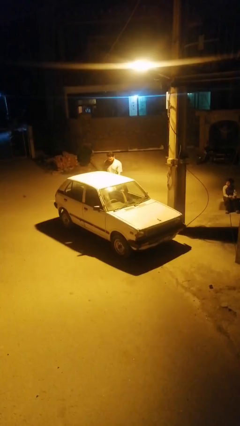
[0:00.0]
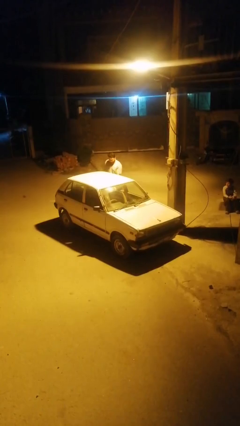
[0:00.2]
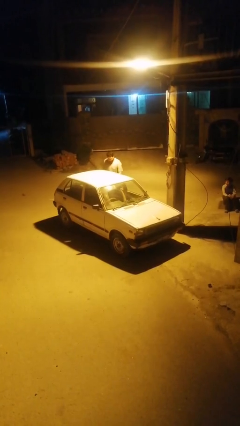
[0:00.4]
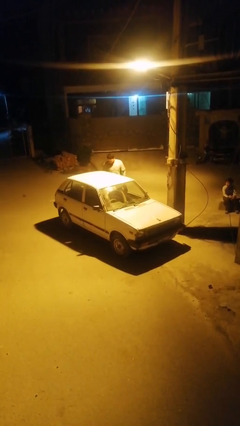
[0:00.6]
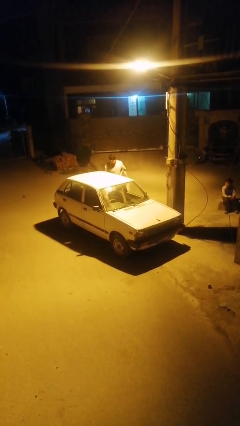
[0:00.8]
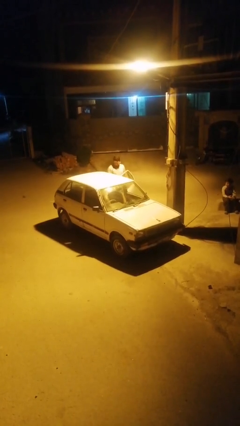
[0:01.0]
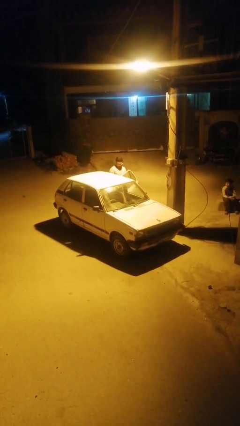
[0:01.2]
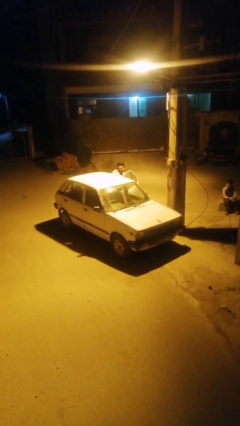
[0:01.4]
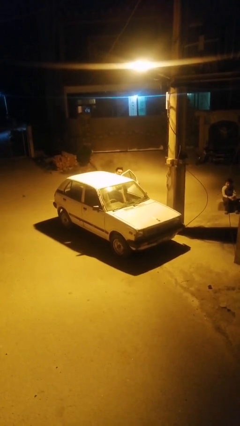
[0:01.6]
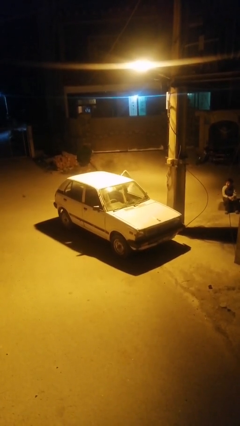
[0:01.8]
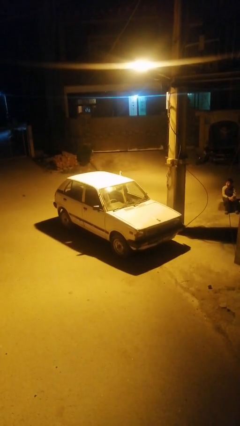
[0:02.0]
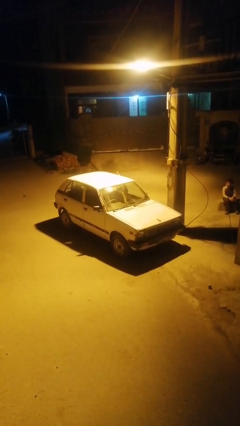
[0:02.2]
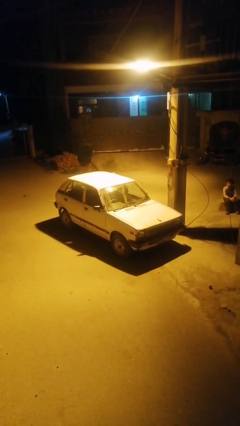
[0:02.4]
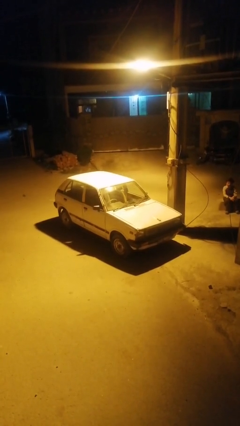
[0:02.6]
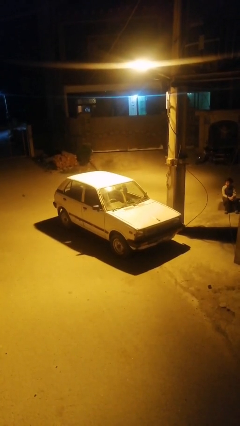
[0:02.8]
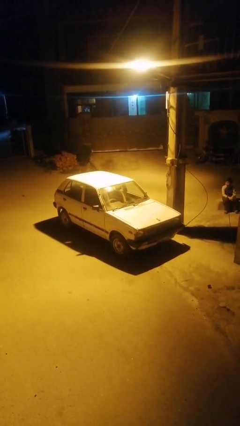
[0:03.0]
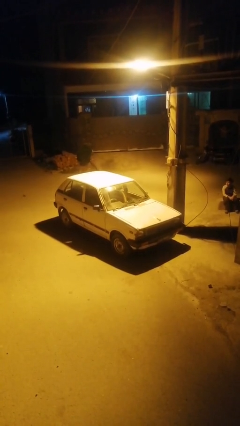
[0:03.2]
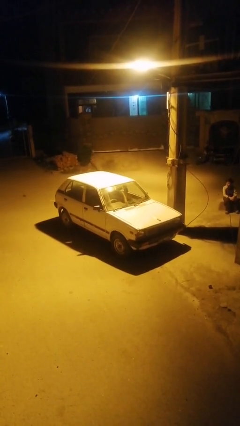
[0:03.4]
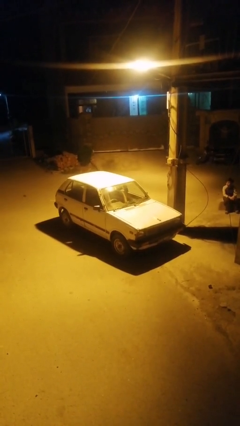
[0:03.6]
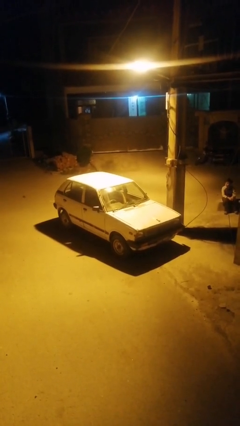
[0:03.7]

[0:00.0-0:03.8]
car picks up person

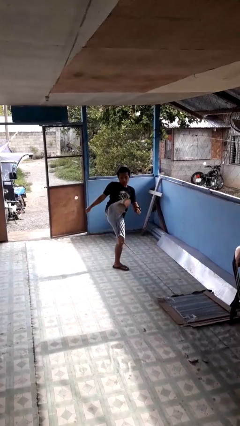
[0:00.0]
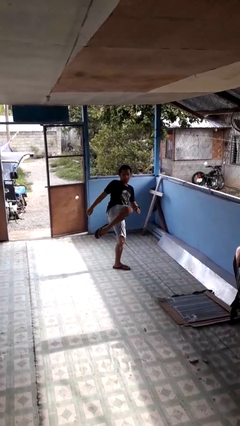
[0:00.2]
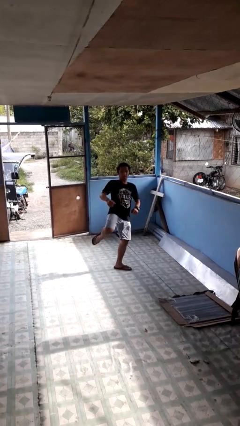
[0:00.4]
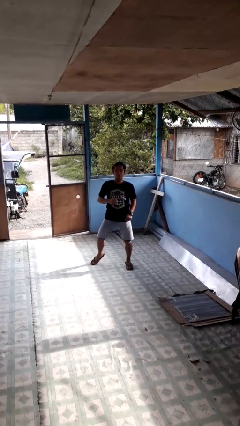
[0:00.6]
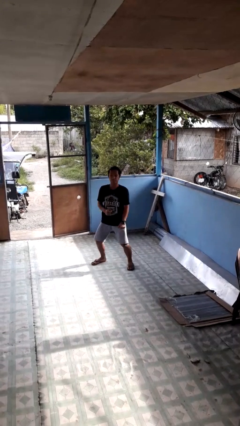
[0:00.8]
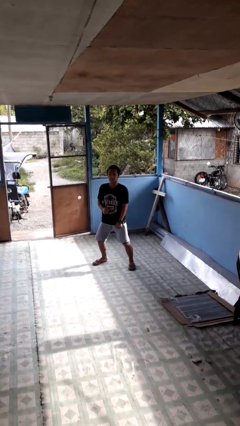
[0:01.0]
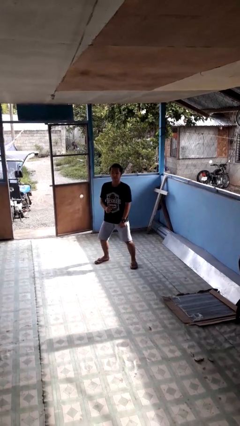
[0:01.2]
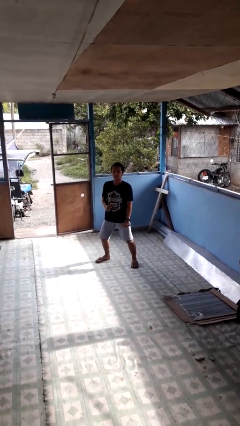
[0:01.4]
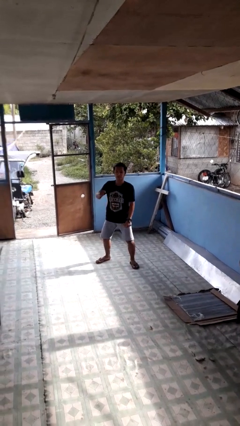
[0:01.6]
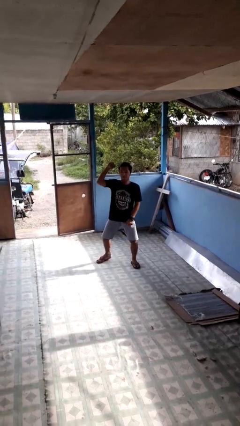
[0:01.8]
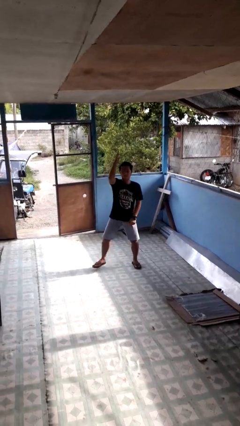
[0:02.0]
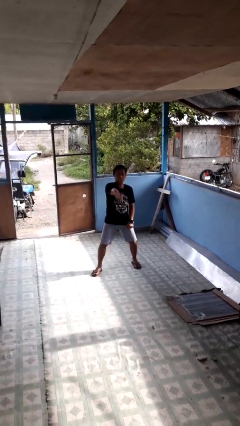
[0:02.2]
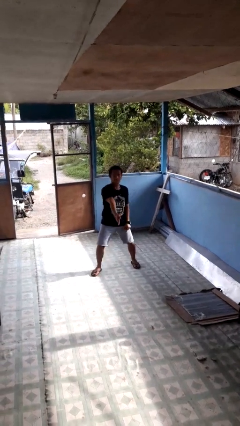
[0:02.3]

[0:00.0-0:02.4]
person karate kicks

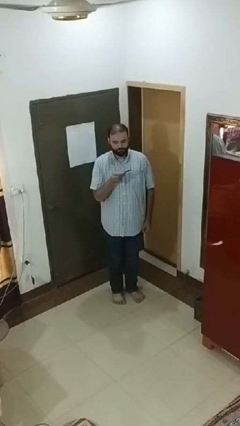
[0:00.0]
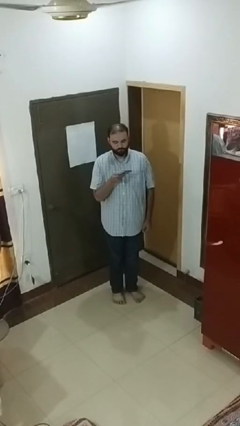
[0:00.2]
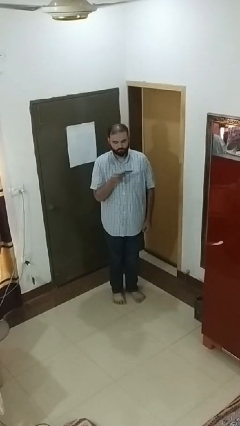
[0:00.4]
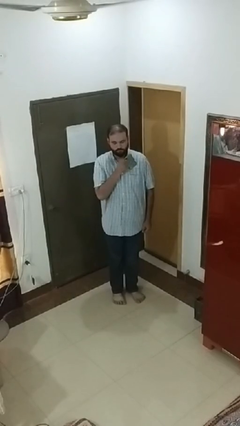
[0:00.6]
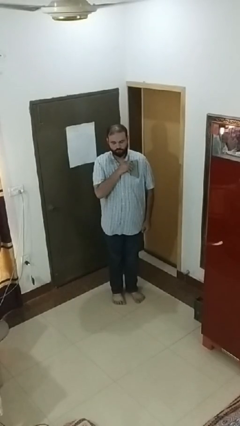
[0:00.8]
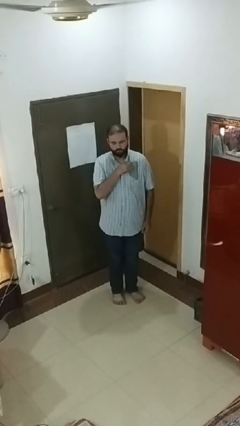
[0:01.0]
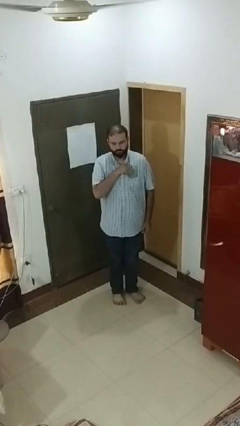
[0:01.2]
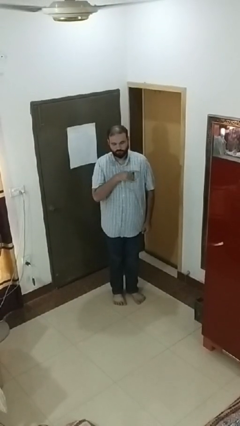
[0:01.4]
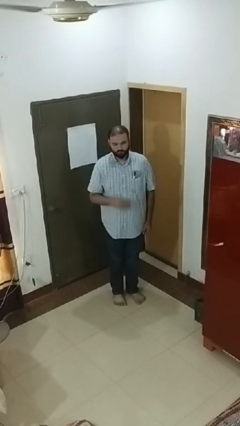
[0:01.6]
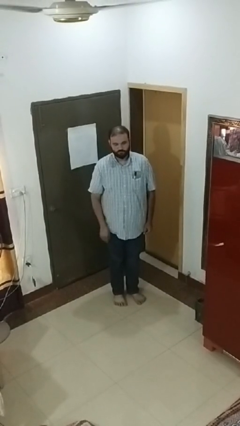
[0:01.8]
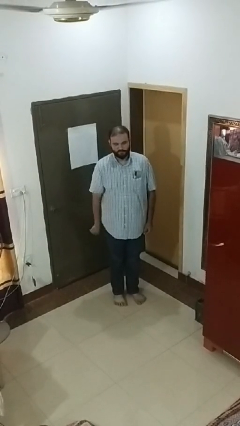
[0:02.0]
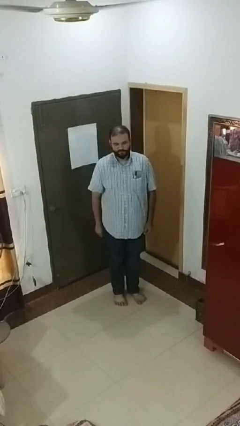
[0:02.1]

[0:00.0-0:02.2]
person puts phone into pocket

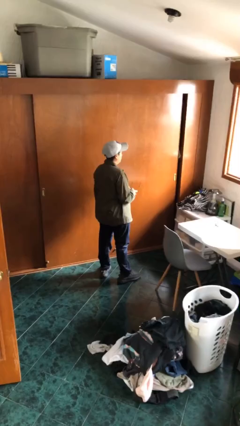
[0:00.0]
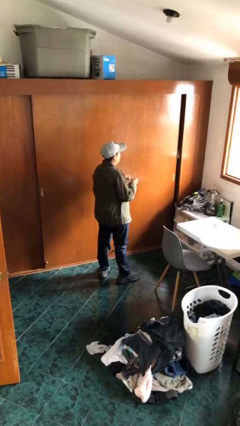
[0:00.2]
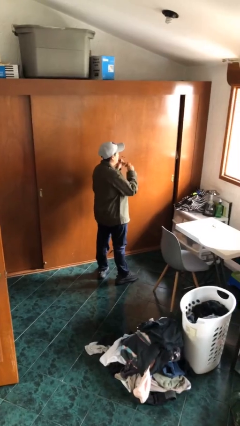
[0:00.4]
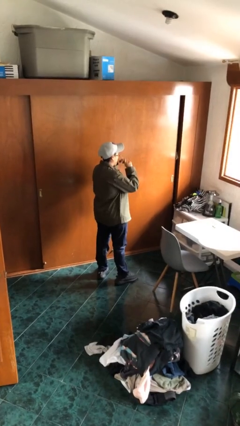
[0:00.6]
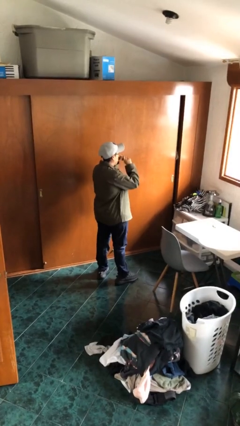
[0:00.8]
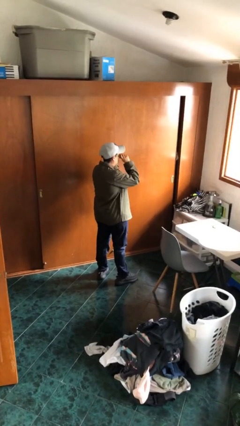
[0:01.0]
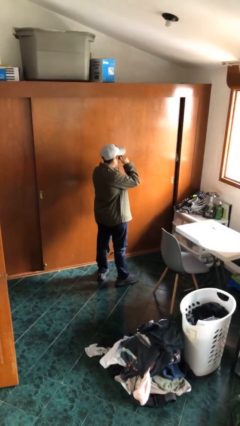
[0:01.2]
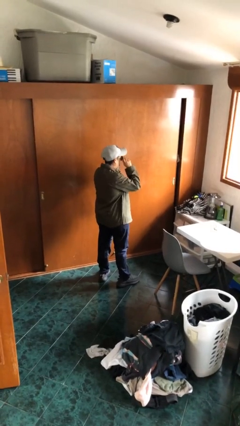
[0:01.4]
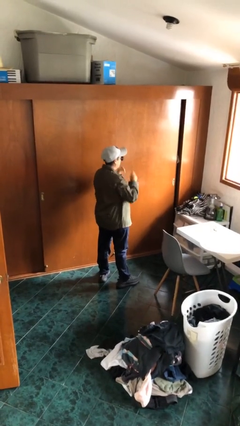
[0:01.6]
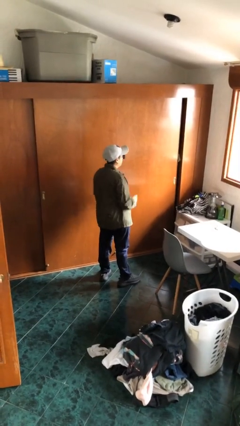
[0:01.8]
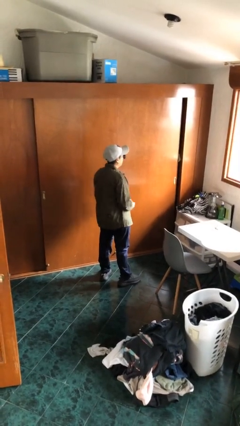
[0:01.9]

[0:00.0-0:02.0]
person puts on sunglasses

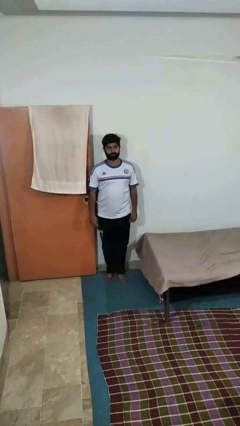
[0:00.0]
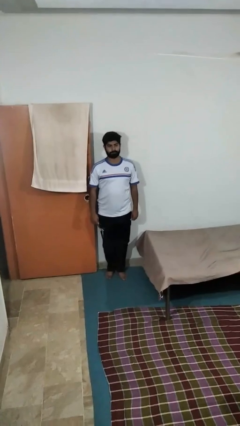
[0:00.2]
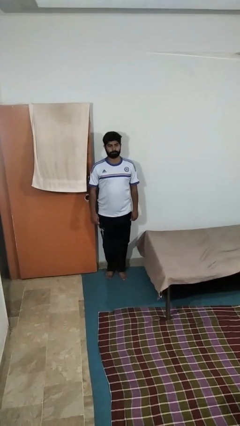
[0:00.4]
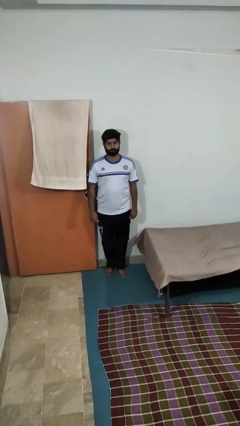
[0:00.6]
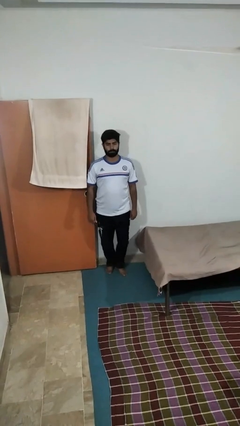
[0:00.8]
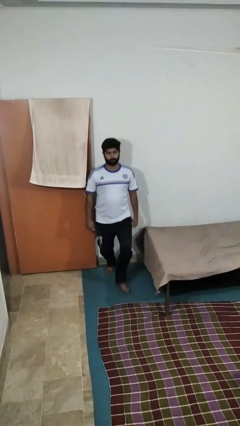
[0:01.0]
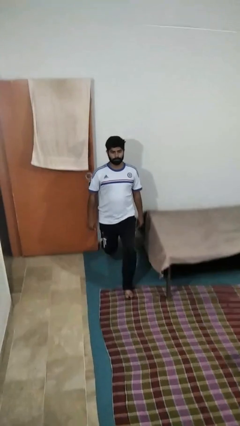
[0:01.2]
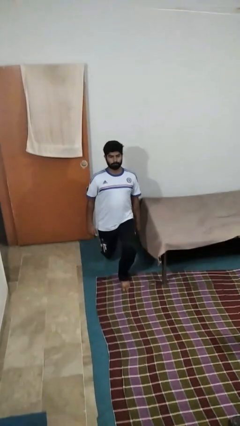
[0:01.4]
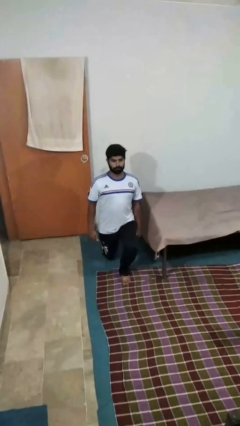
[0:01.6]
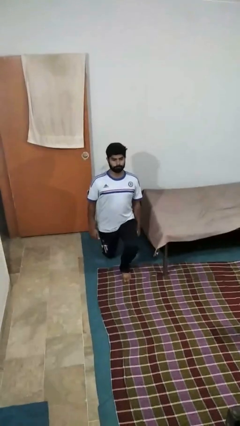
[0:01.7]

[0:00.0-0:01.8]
person kneels

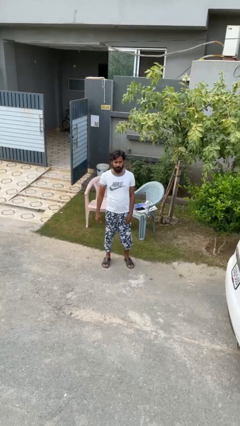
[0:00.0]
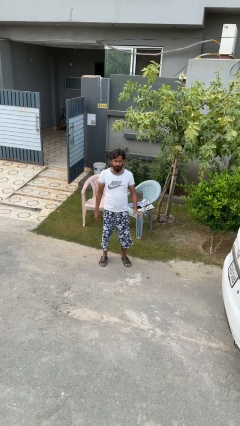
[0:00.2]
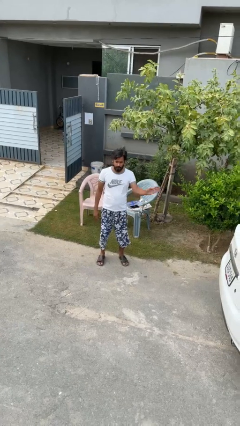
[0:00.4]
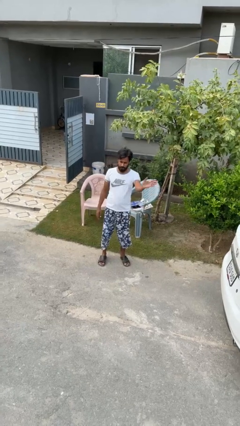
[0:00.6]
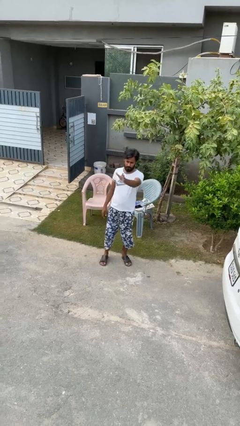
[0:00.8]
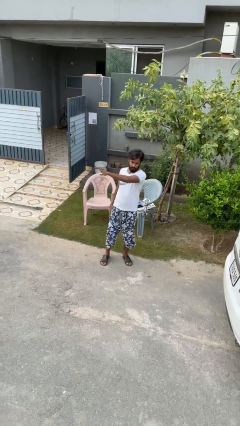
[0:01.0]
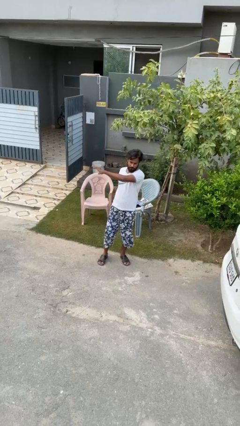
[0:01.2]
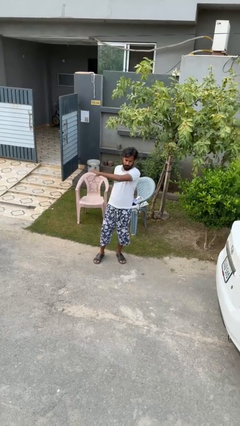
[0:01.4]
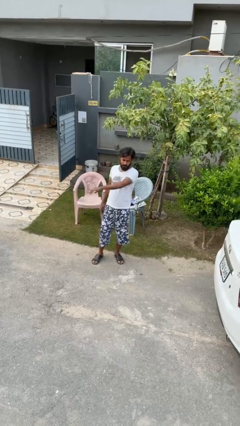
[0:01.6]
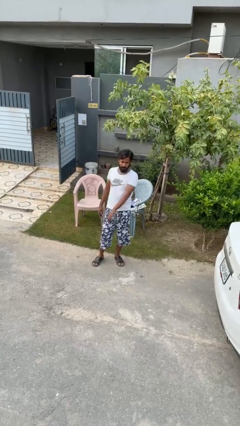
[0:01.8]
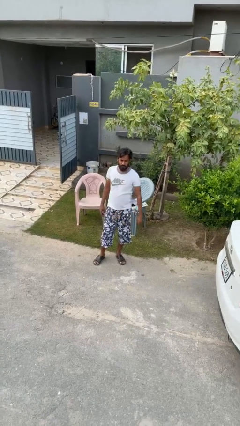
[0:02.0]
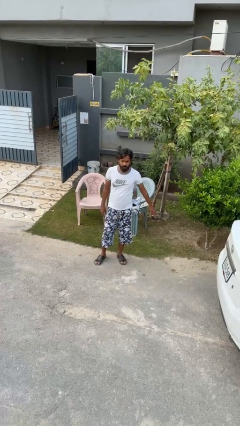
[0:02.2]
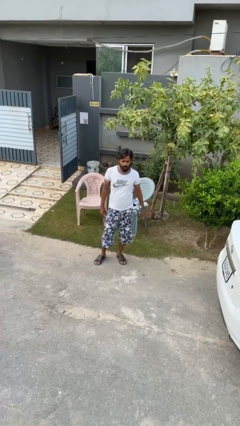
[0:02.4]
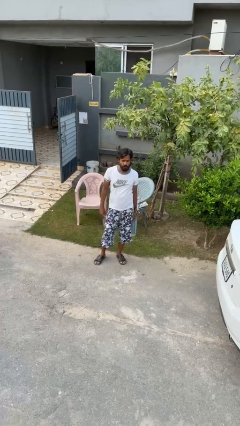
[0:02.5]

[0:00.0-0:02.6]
person gestures swipe right

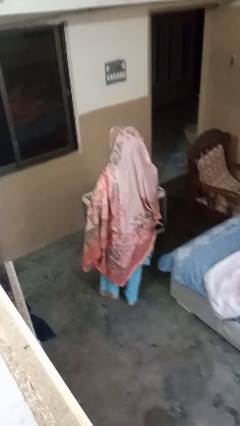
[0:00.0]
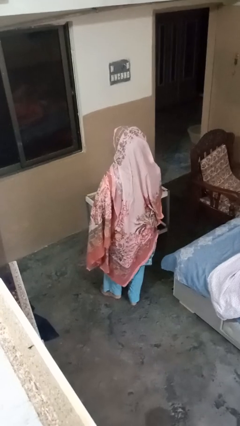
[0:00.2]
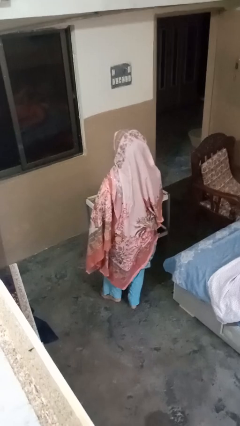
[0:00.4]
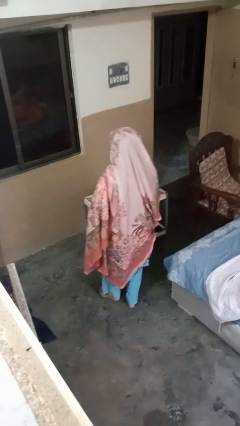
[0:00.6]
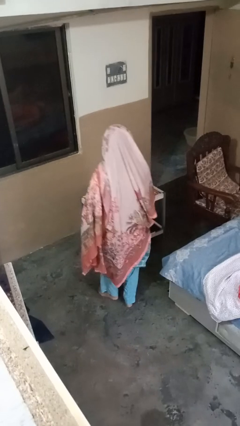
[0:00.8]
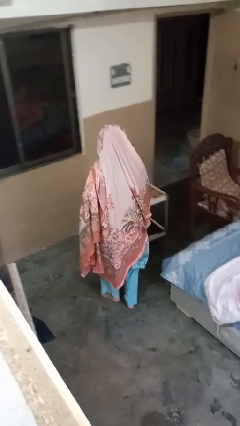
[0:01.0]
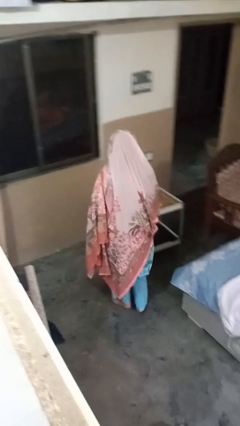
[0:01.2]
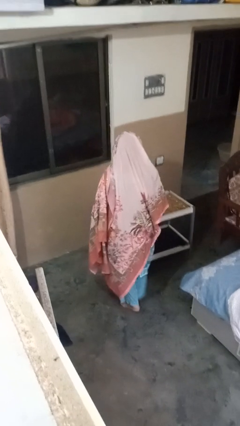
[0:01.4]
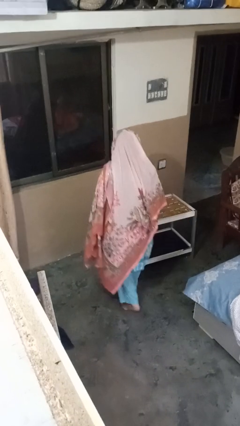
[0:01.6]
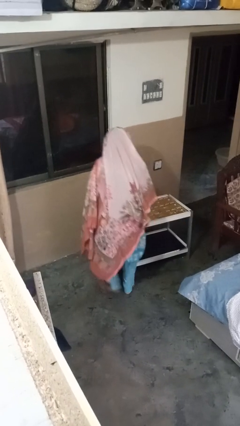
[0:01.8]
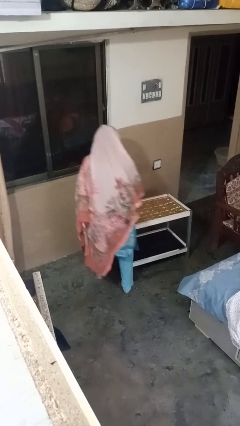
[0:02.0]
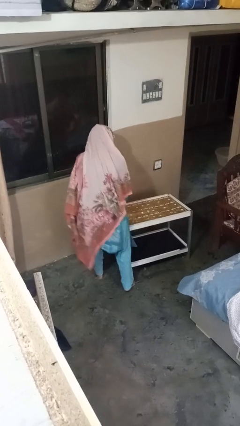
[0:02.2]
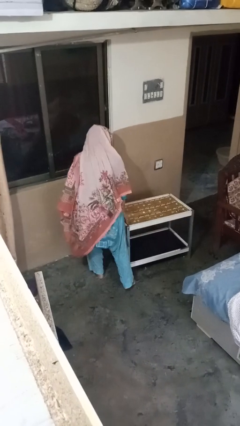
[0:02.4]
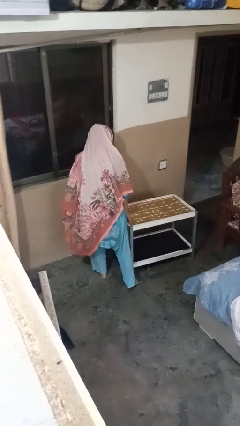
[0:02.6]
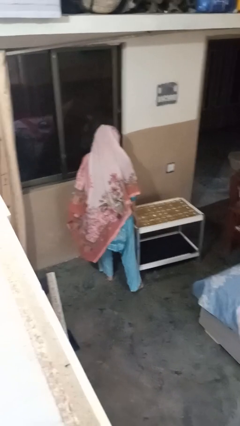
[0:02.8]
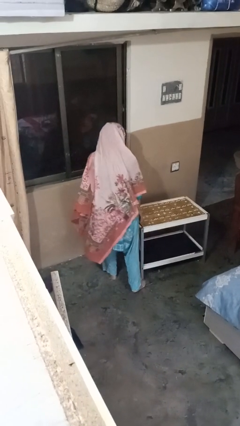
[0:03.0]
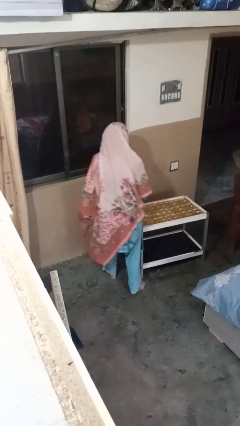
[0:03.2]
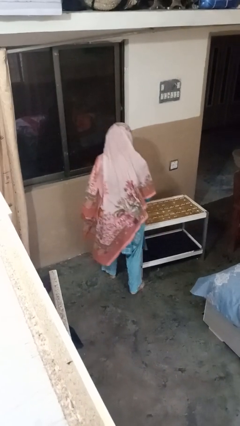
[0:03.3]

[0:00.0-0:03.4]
person bumps into table
